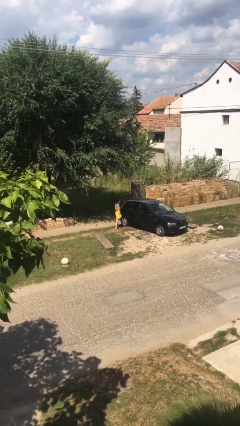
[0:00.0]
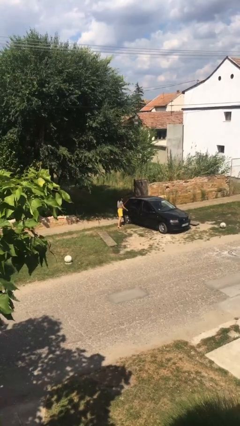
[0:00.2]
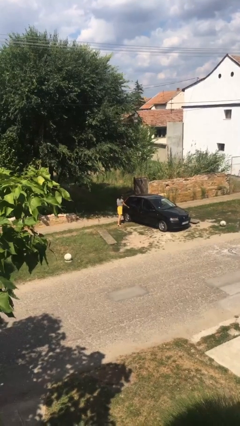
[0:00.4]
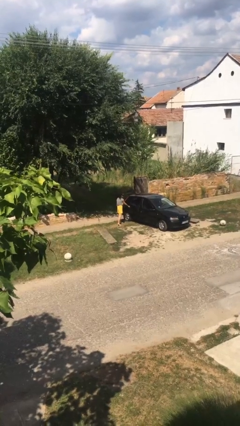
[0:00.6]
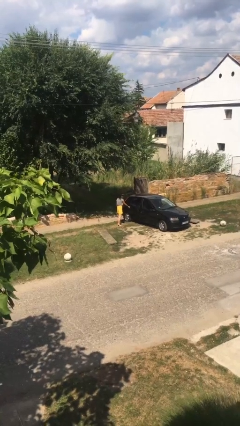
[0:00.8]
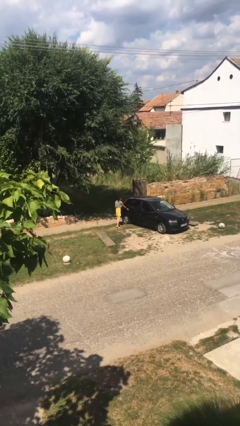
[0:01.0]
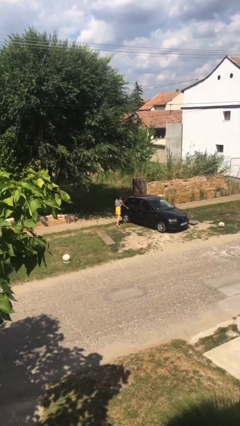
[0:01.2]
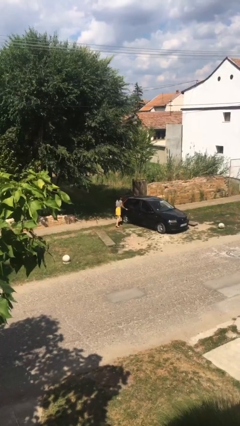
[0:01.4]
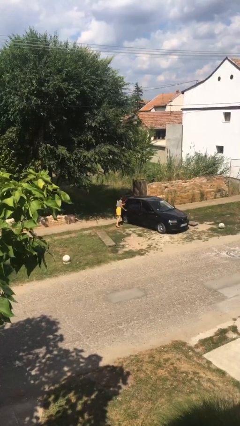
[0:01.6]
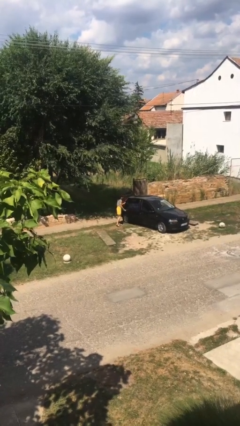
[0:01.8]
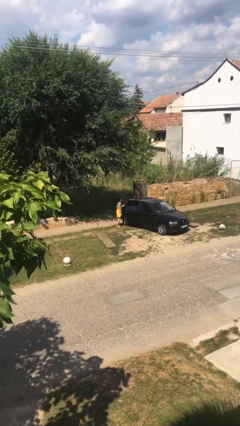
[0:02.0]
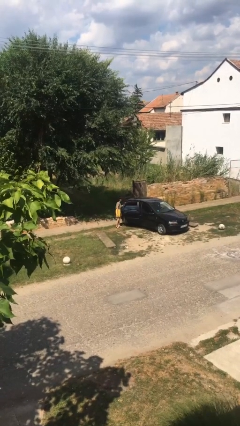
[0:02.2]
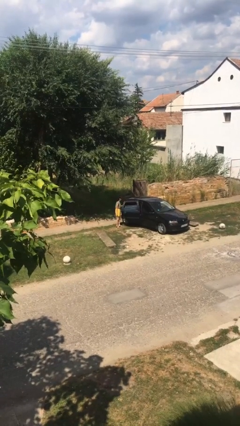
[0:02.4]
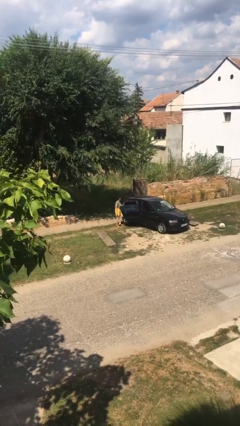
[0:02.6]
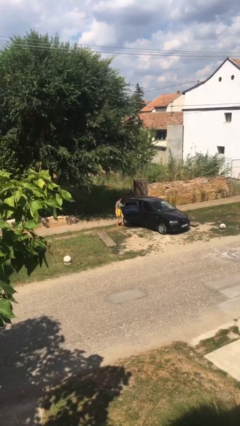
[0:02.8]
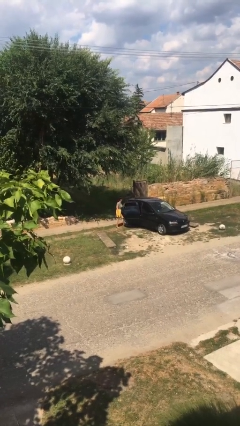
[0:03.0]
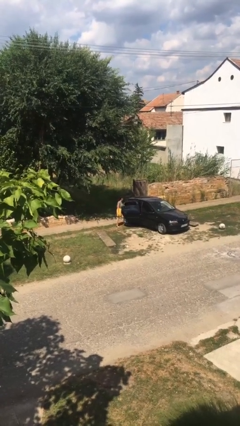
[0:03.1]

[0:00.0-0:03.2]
person opens car door

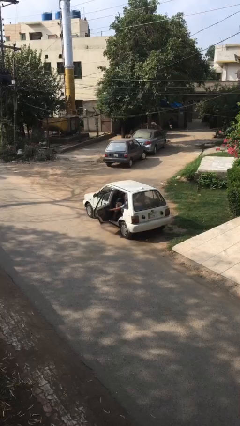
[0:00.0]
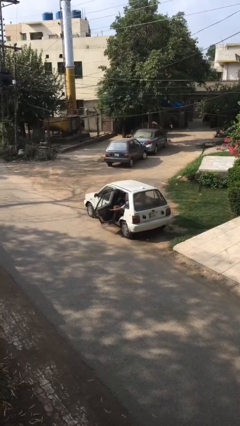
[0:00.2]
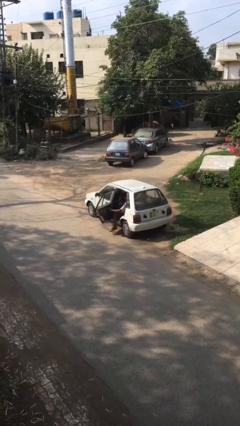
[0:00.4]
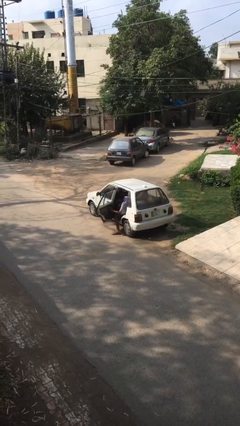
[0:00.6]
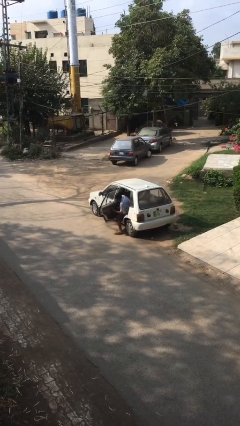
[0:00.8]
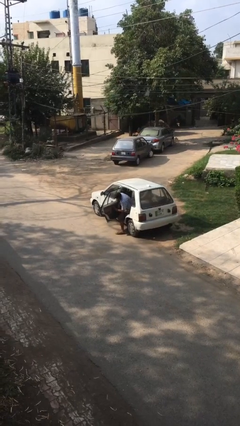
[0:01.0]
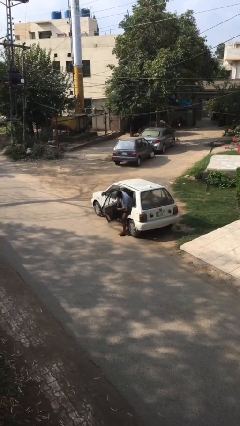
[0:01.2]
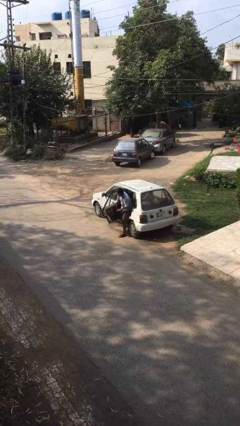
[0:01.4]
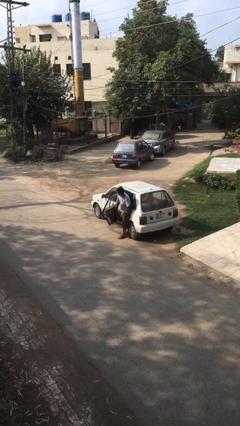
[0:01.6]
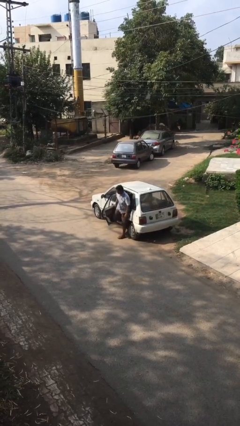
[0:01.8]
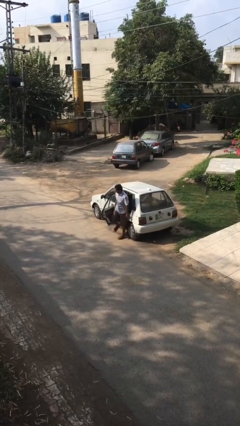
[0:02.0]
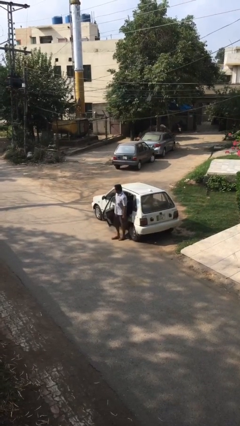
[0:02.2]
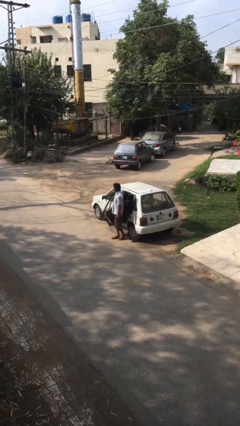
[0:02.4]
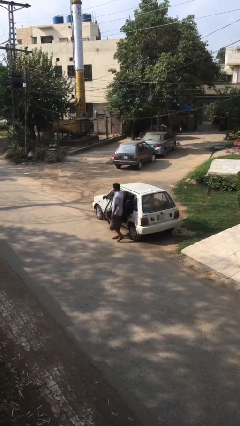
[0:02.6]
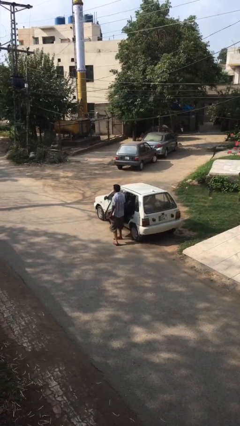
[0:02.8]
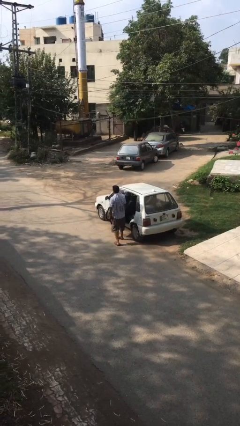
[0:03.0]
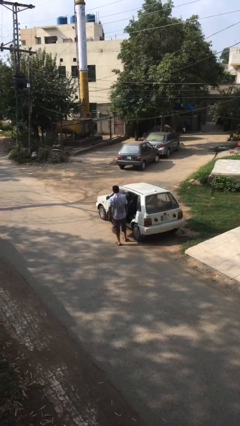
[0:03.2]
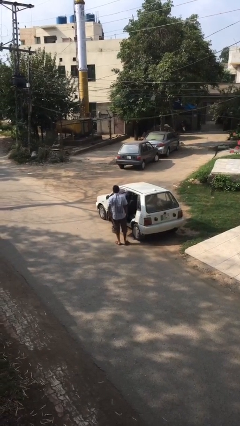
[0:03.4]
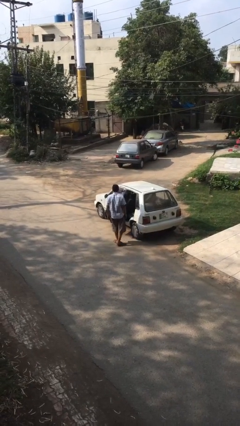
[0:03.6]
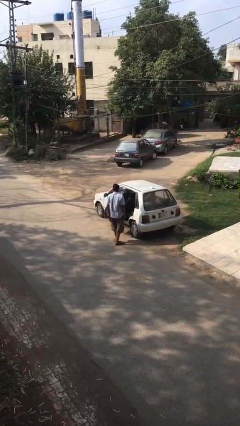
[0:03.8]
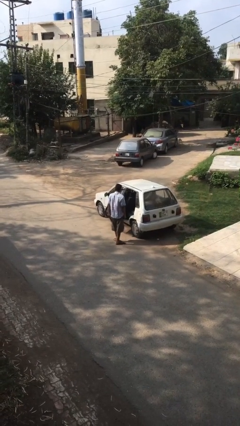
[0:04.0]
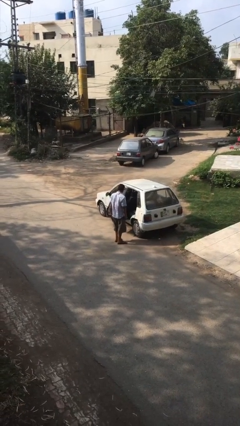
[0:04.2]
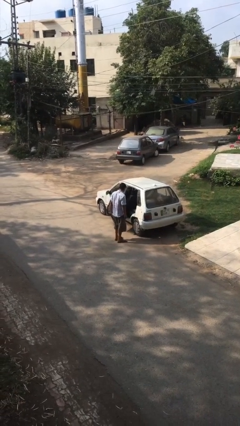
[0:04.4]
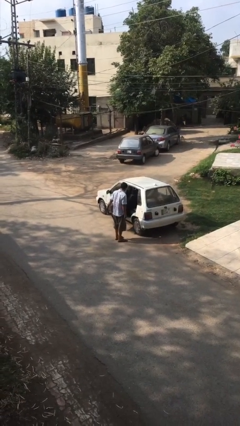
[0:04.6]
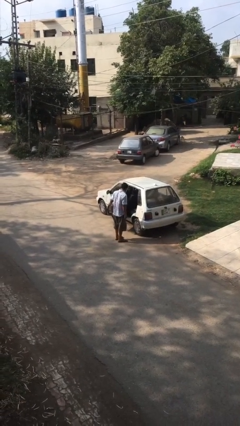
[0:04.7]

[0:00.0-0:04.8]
person exits car

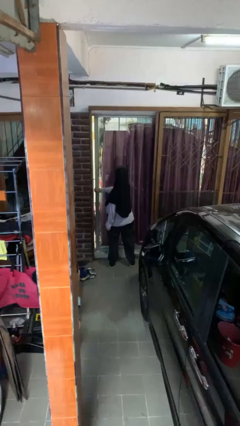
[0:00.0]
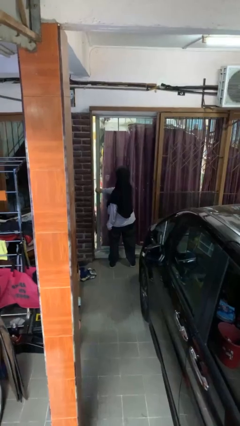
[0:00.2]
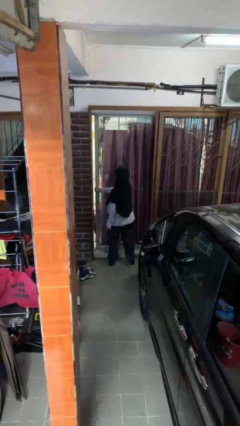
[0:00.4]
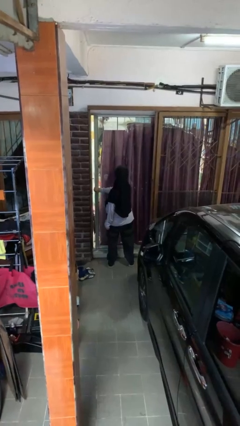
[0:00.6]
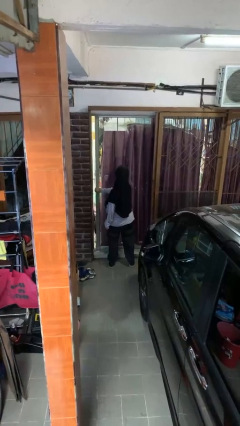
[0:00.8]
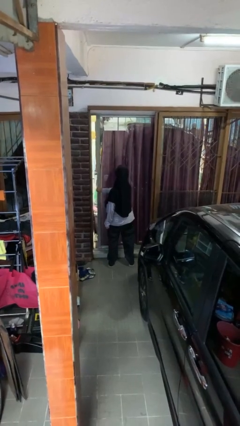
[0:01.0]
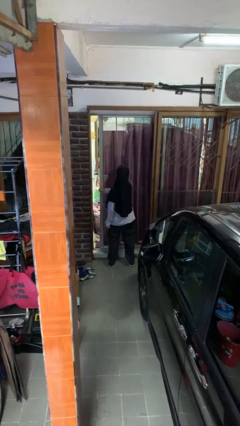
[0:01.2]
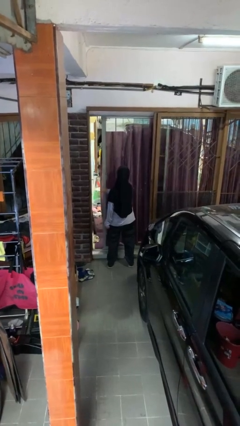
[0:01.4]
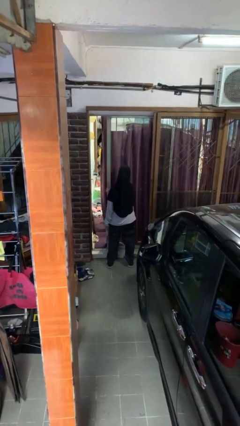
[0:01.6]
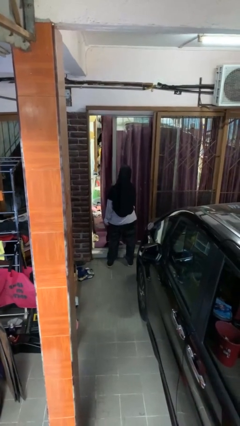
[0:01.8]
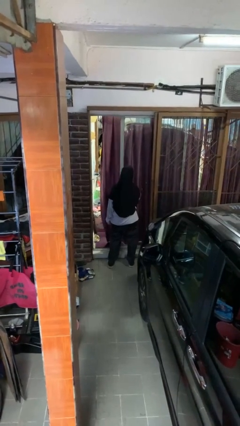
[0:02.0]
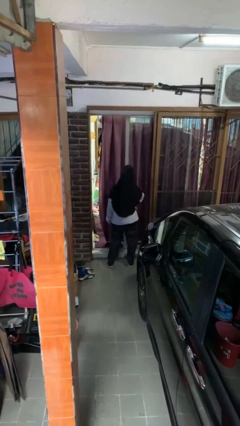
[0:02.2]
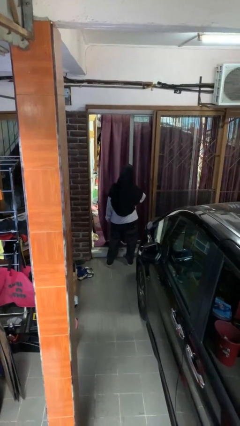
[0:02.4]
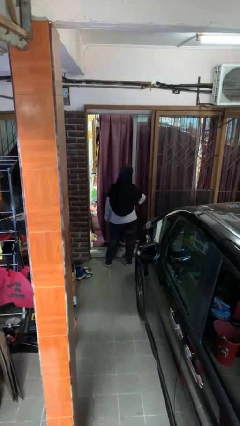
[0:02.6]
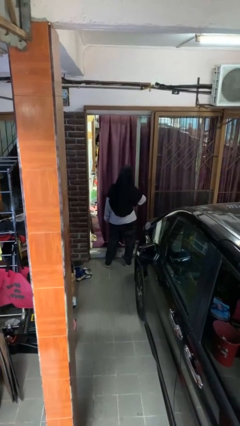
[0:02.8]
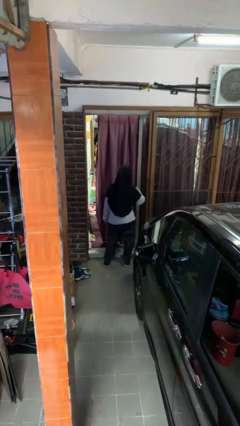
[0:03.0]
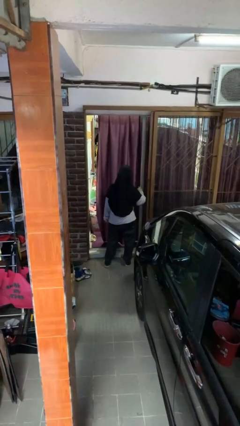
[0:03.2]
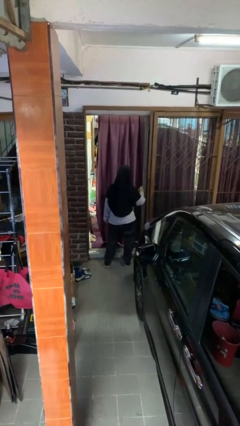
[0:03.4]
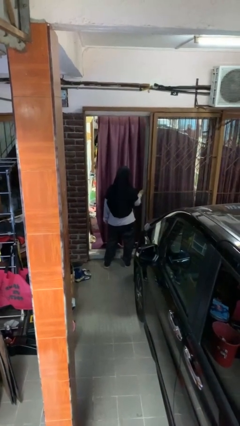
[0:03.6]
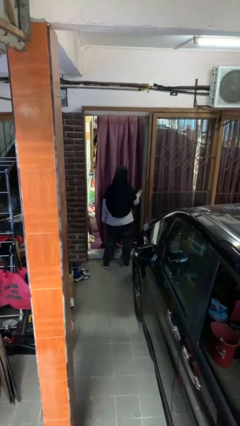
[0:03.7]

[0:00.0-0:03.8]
person opens sliding door

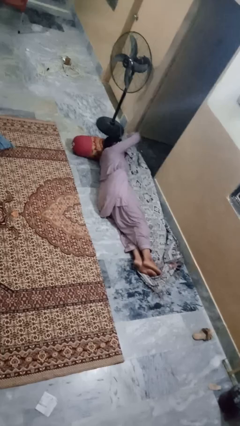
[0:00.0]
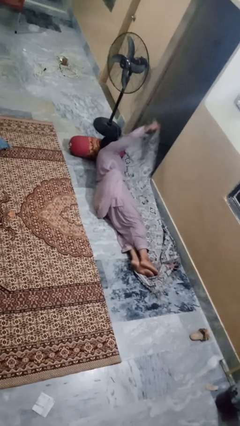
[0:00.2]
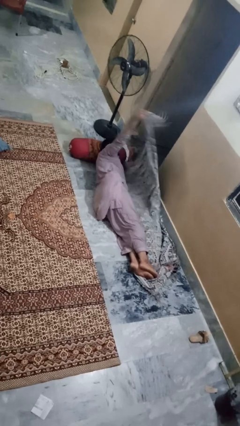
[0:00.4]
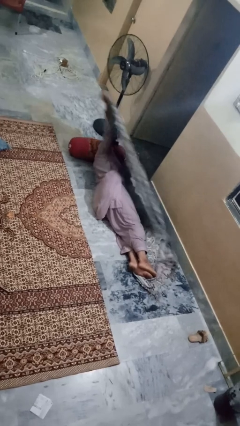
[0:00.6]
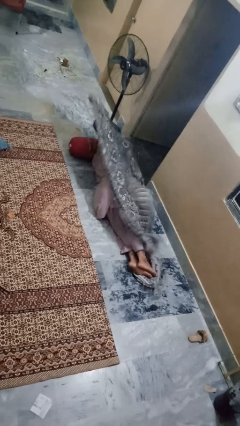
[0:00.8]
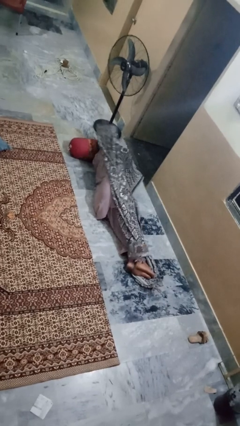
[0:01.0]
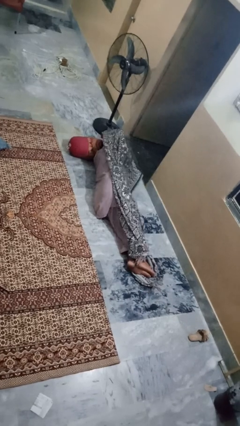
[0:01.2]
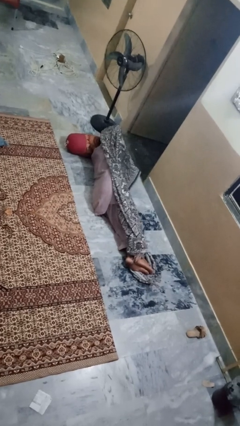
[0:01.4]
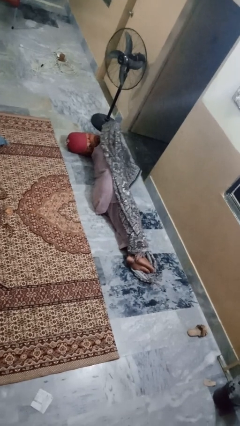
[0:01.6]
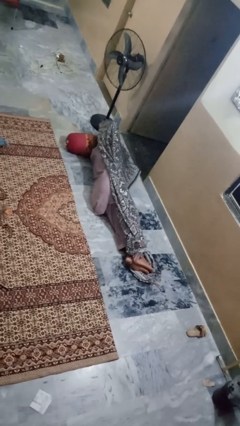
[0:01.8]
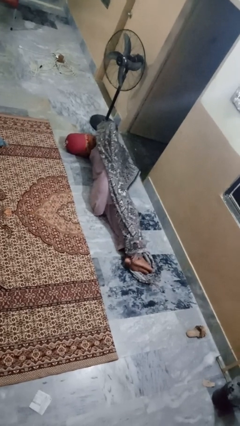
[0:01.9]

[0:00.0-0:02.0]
person covers with blanket

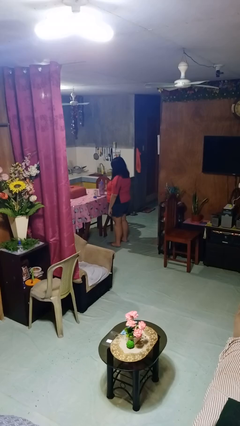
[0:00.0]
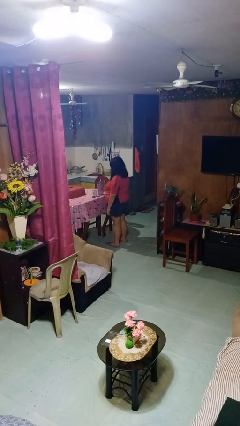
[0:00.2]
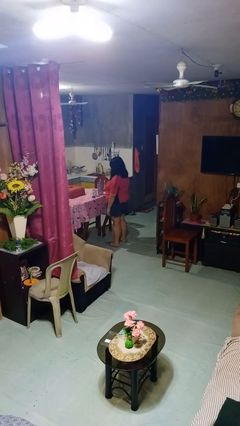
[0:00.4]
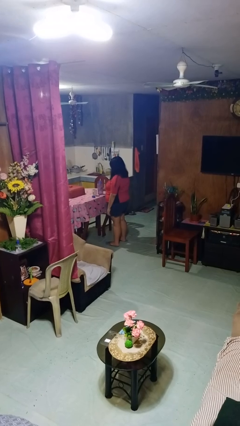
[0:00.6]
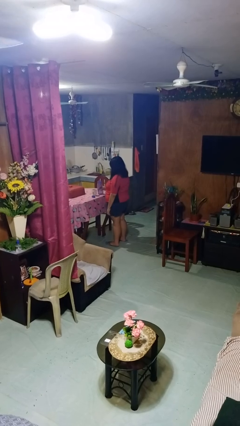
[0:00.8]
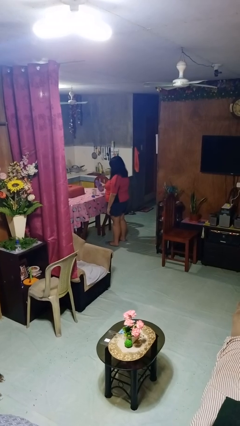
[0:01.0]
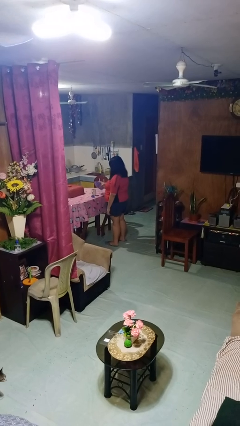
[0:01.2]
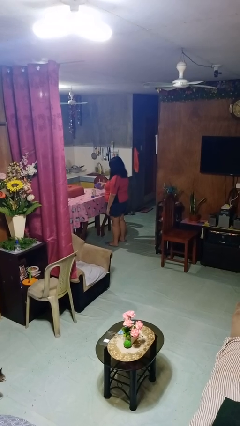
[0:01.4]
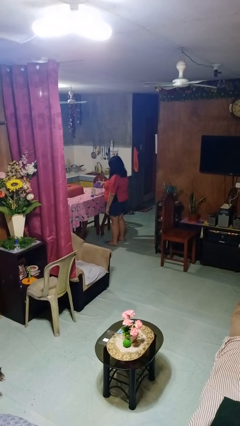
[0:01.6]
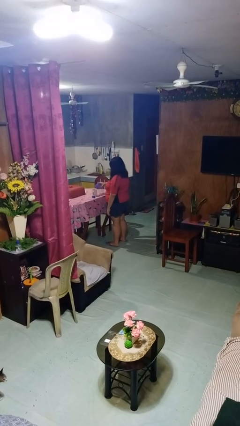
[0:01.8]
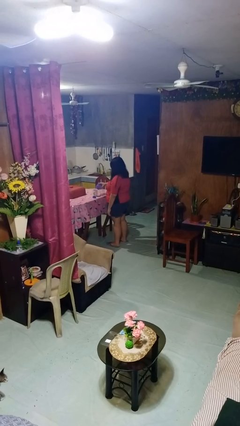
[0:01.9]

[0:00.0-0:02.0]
person pours liquid into cup

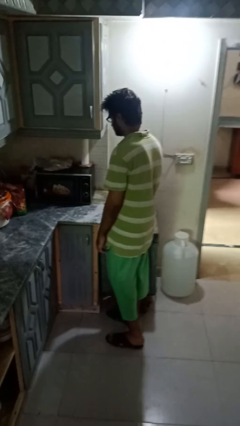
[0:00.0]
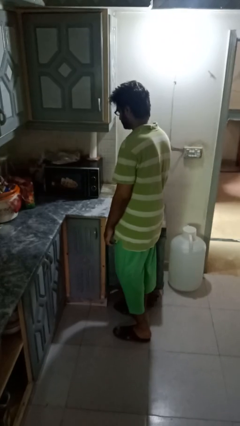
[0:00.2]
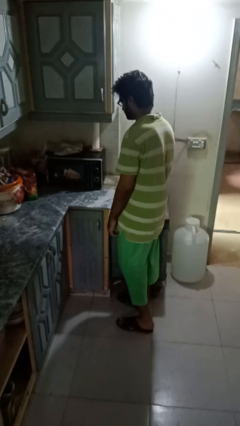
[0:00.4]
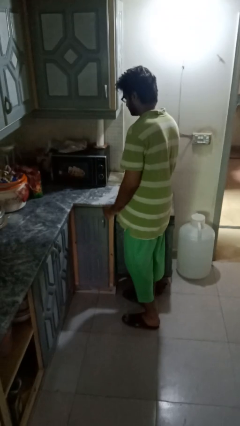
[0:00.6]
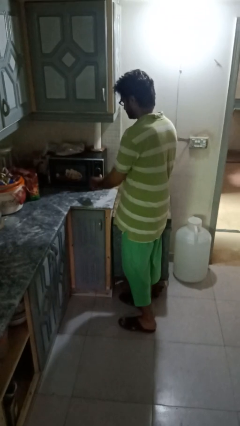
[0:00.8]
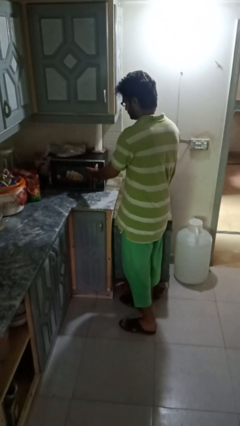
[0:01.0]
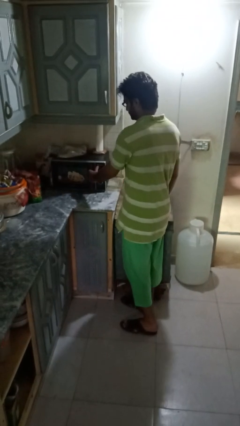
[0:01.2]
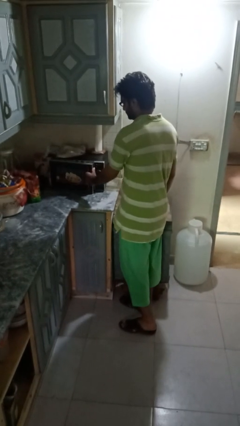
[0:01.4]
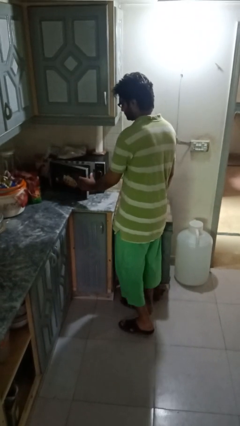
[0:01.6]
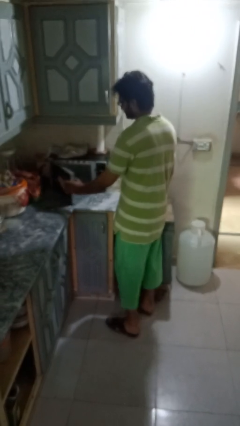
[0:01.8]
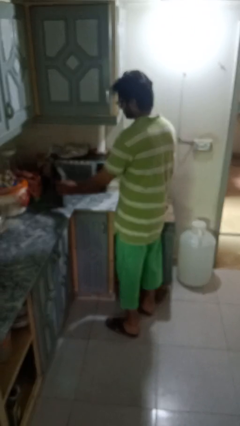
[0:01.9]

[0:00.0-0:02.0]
person opens microwave
